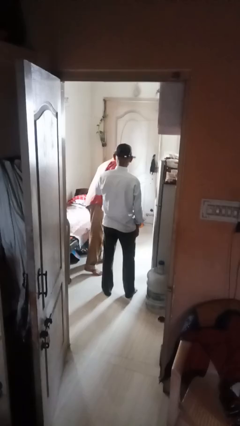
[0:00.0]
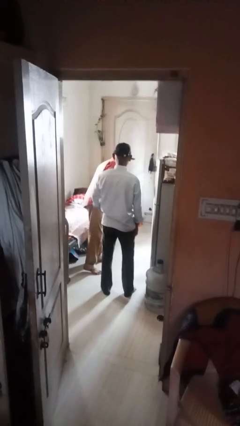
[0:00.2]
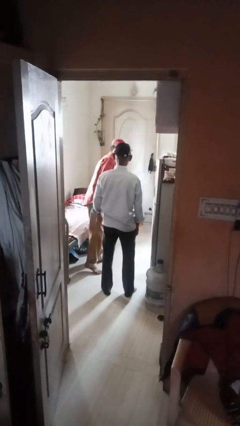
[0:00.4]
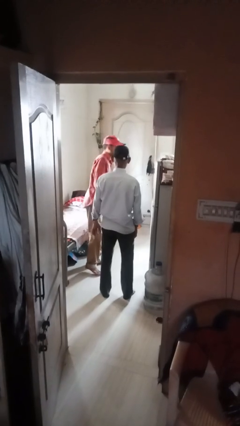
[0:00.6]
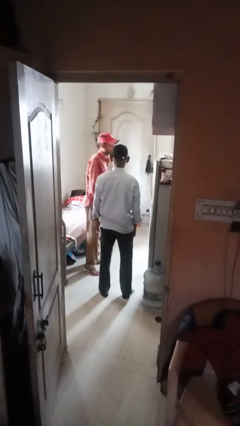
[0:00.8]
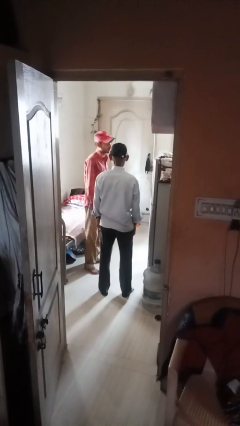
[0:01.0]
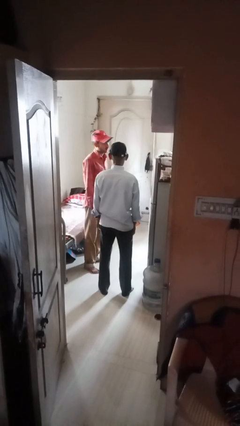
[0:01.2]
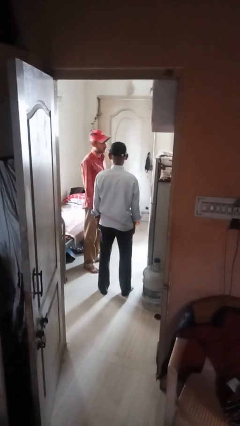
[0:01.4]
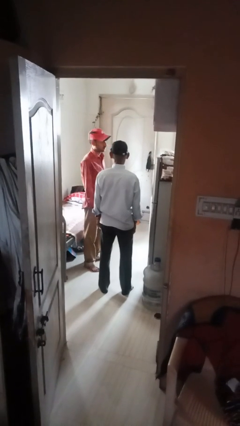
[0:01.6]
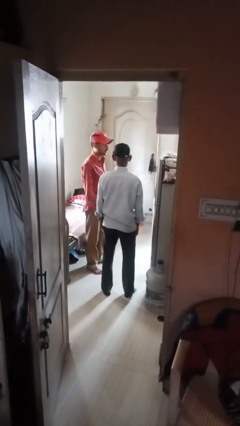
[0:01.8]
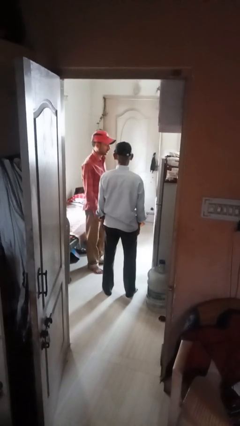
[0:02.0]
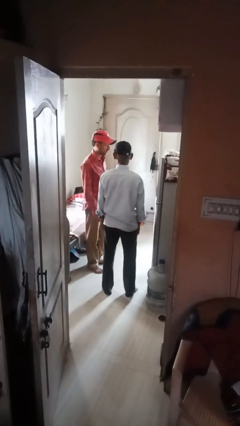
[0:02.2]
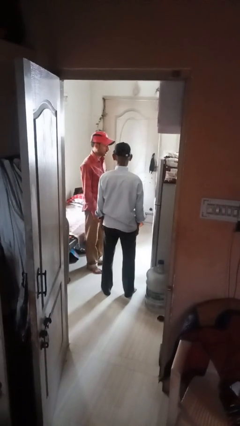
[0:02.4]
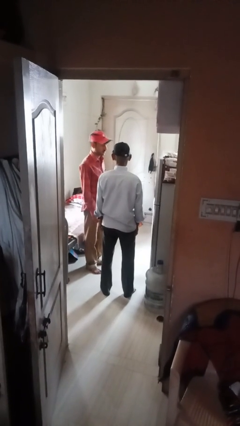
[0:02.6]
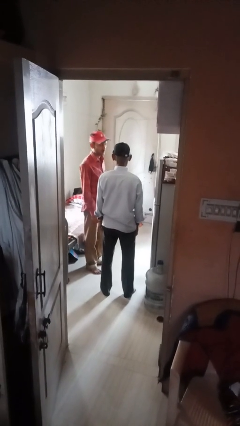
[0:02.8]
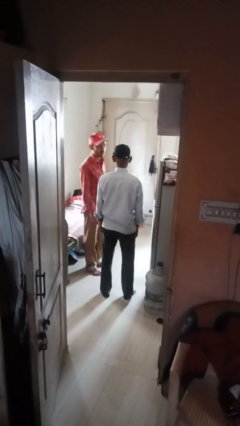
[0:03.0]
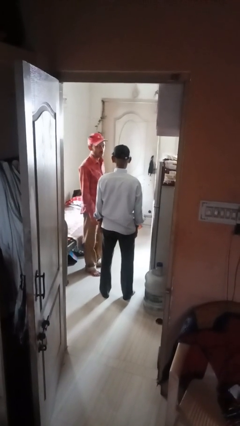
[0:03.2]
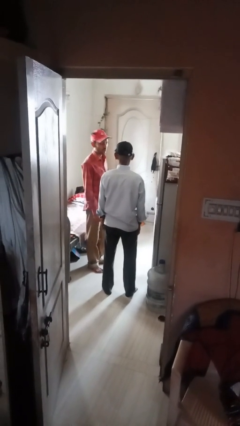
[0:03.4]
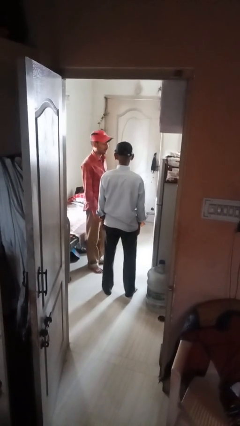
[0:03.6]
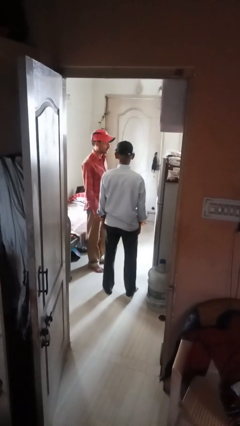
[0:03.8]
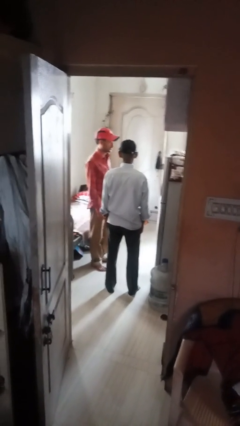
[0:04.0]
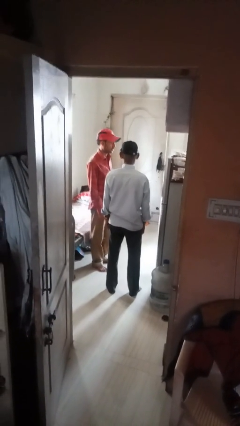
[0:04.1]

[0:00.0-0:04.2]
person shoves person

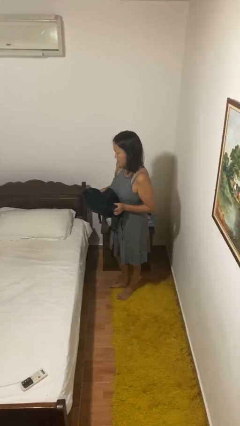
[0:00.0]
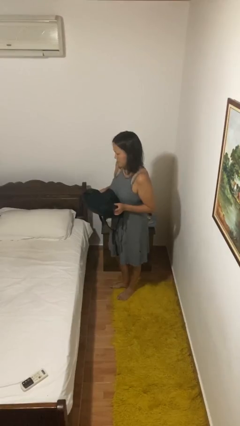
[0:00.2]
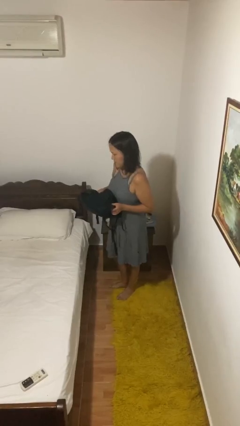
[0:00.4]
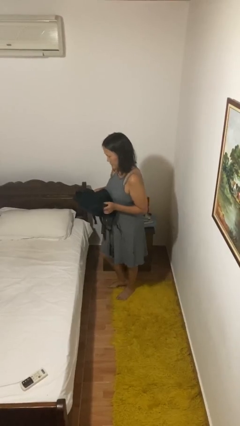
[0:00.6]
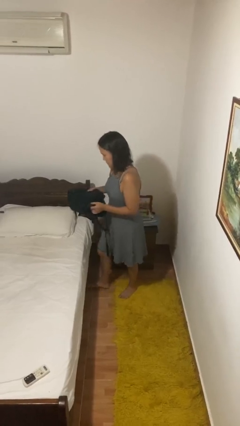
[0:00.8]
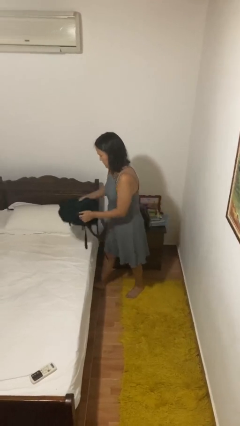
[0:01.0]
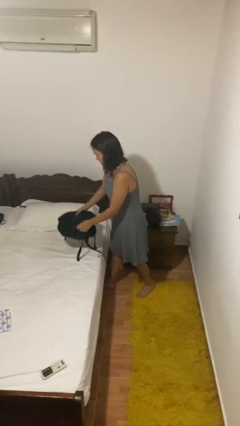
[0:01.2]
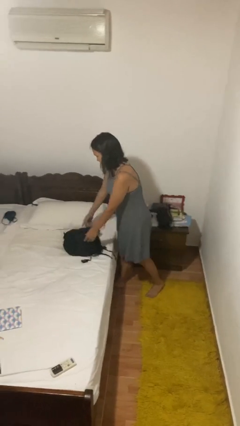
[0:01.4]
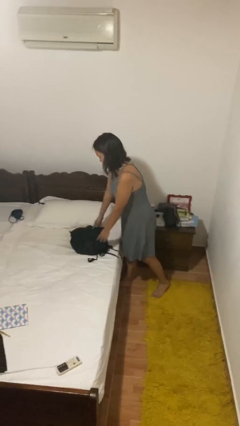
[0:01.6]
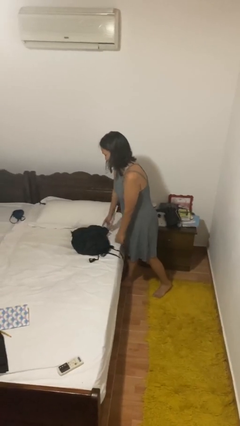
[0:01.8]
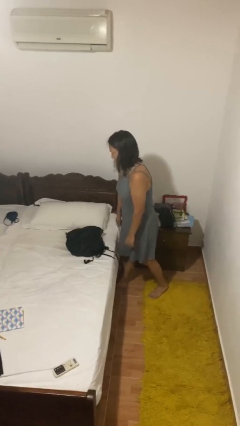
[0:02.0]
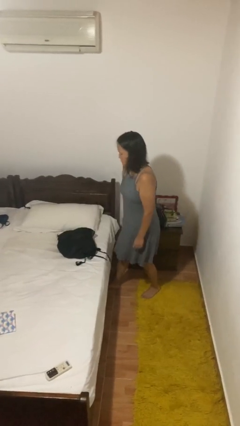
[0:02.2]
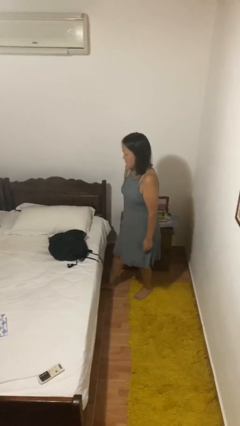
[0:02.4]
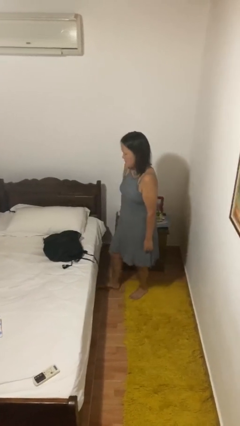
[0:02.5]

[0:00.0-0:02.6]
person puts down object on bed

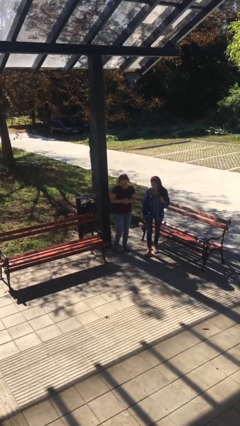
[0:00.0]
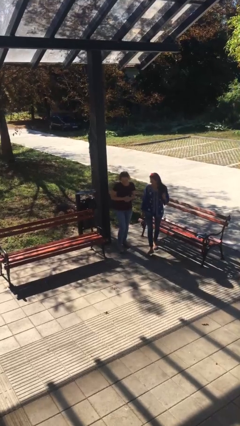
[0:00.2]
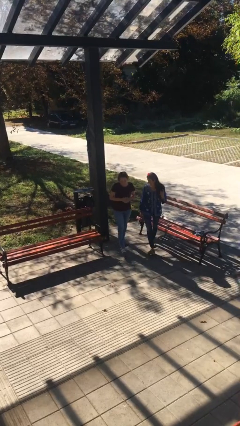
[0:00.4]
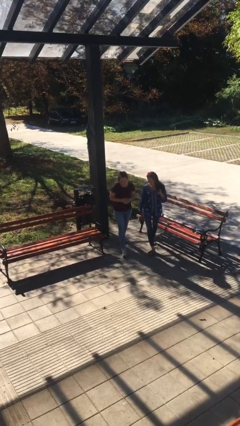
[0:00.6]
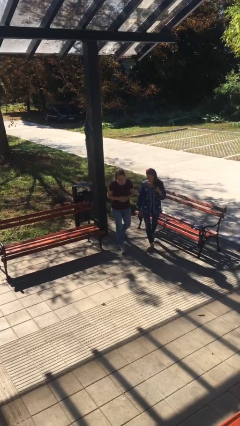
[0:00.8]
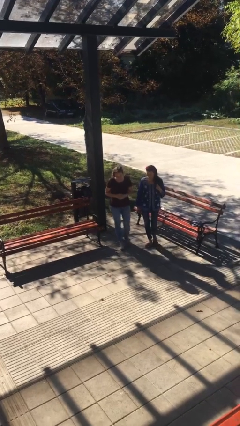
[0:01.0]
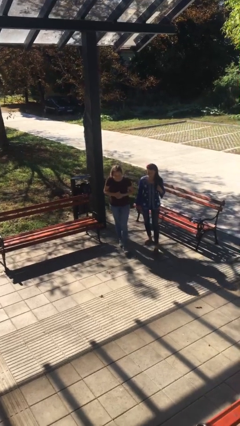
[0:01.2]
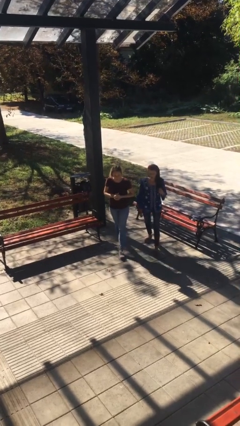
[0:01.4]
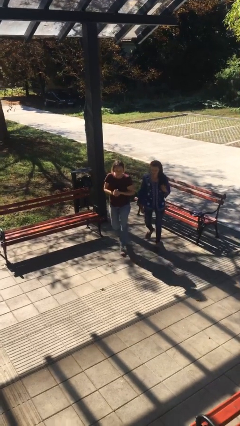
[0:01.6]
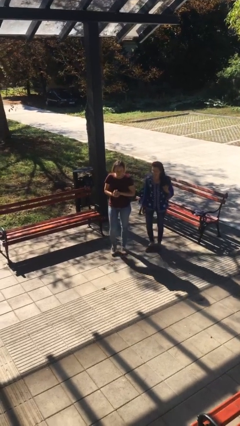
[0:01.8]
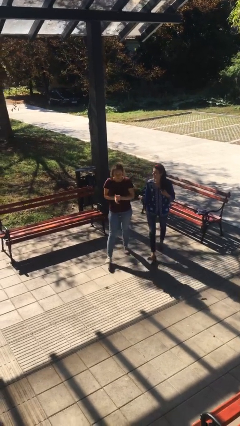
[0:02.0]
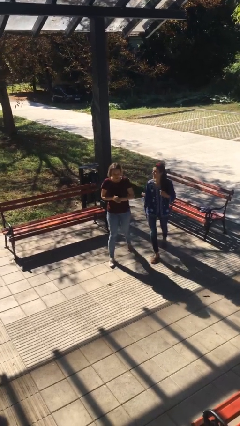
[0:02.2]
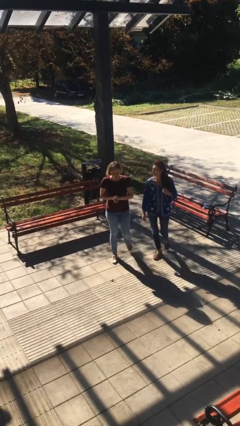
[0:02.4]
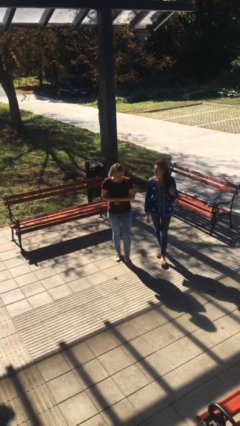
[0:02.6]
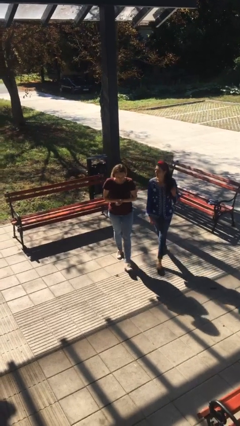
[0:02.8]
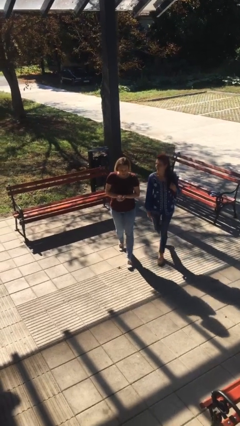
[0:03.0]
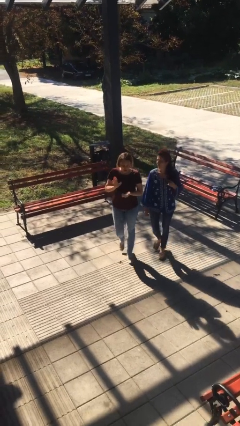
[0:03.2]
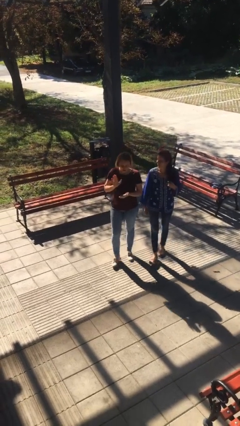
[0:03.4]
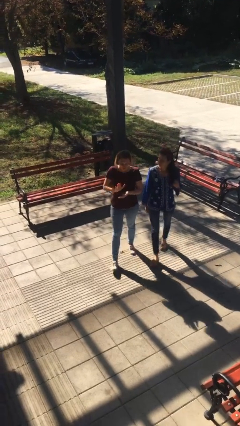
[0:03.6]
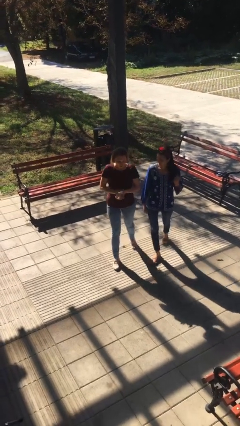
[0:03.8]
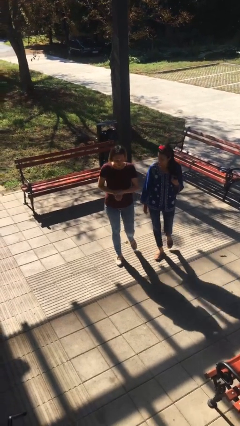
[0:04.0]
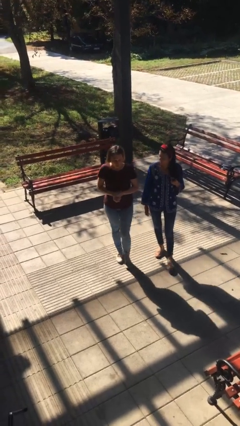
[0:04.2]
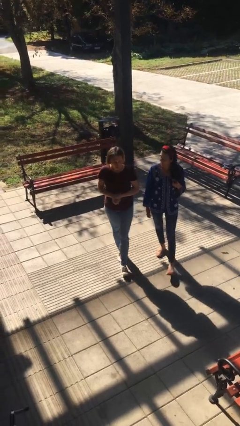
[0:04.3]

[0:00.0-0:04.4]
person talks to person

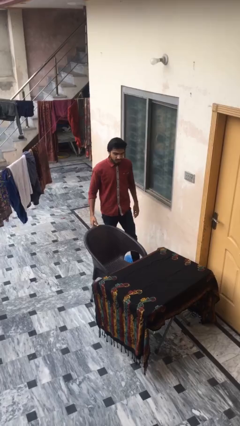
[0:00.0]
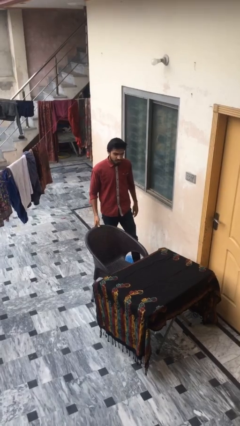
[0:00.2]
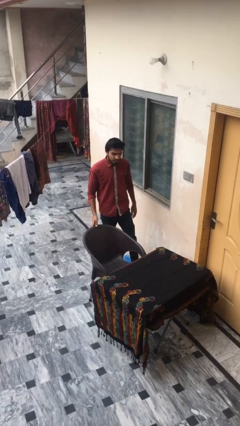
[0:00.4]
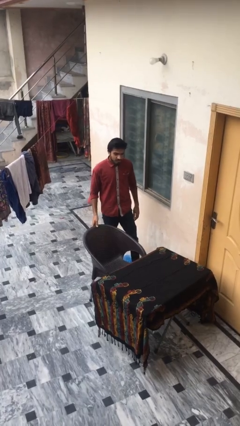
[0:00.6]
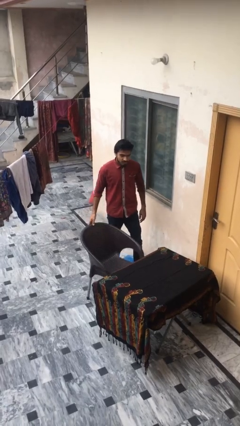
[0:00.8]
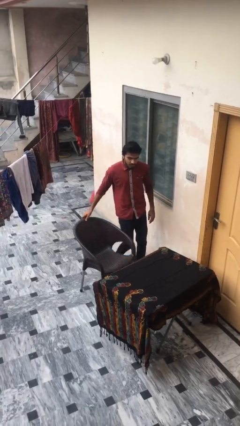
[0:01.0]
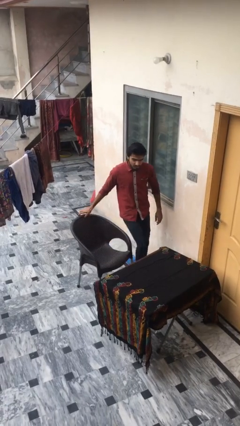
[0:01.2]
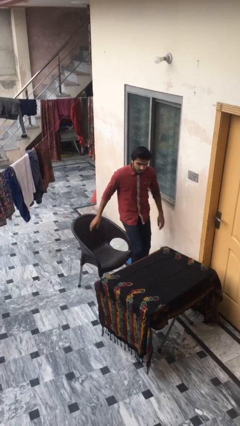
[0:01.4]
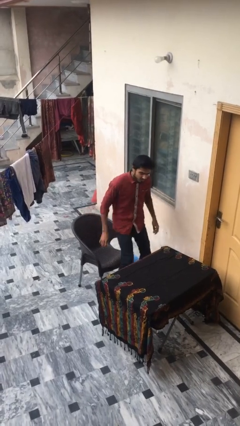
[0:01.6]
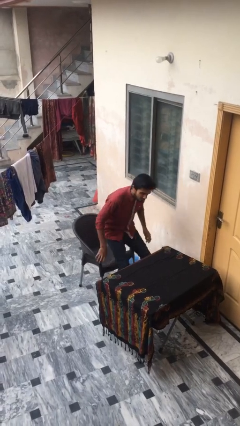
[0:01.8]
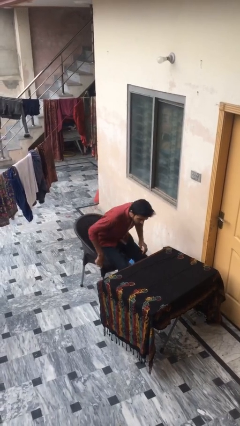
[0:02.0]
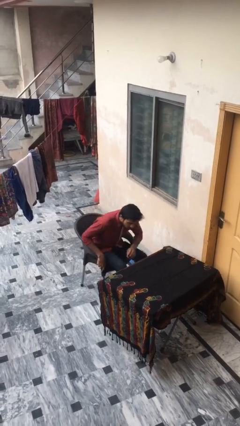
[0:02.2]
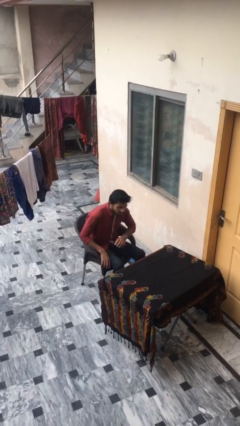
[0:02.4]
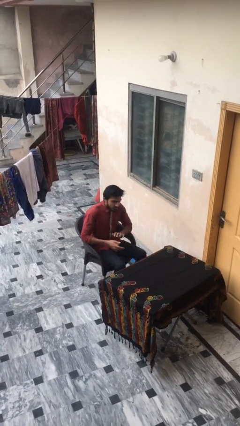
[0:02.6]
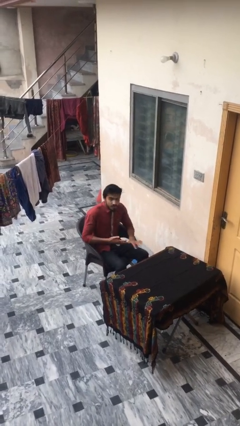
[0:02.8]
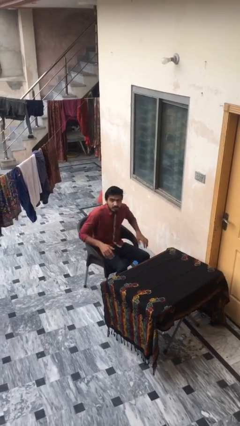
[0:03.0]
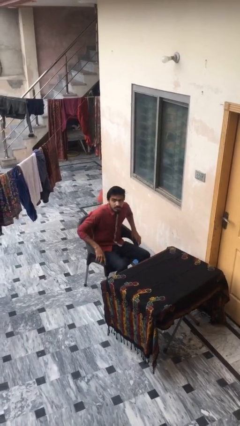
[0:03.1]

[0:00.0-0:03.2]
person sits down

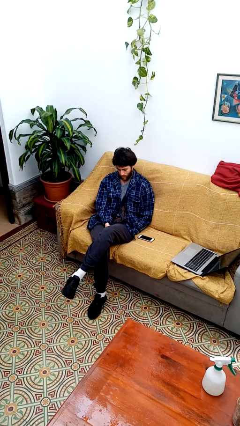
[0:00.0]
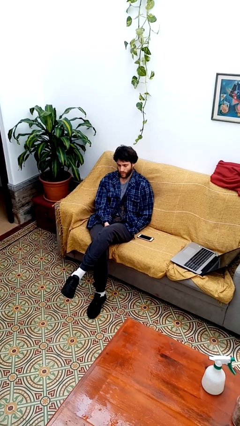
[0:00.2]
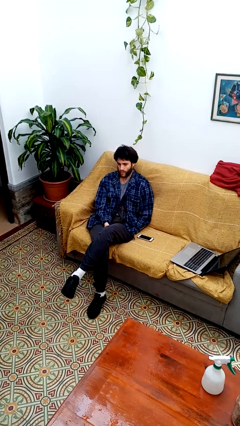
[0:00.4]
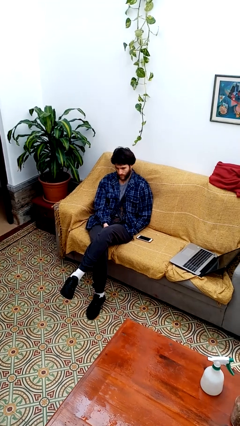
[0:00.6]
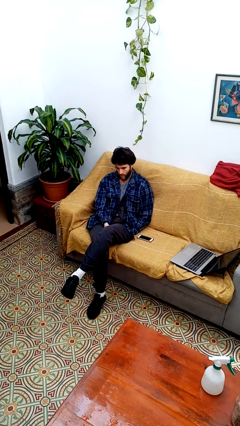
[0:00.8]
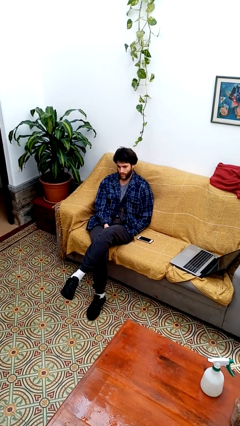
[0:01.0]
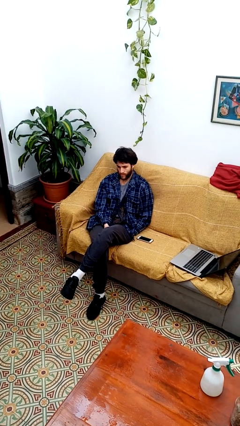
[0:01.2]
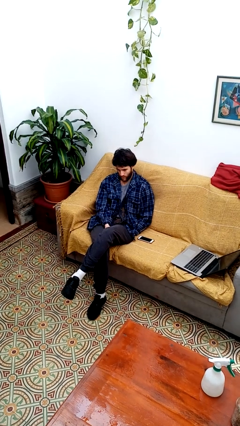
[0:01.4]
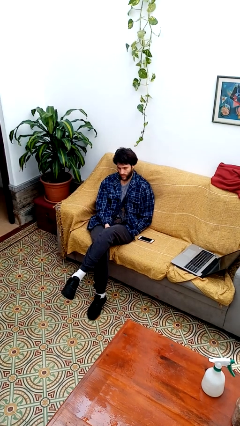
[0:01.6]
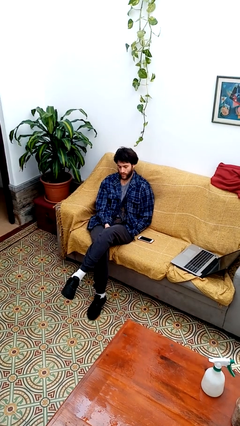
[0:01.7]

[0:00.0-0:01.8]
person nods head

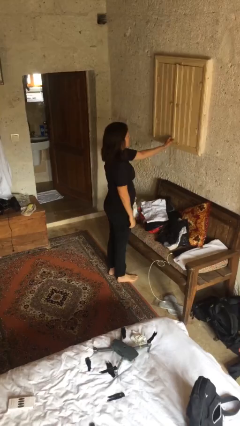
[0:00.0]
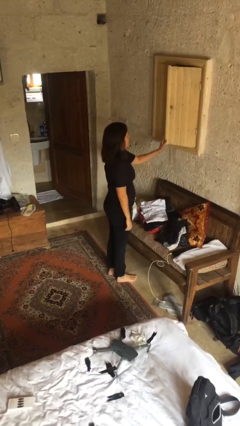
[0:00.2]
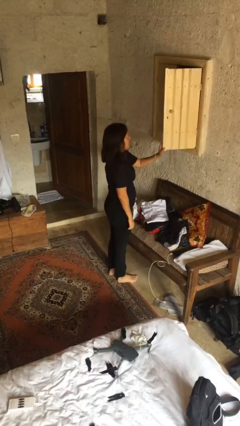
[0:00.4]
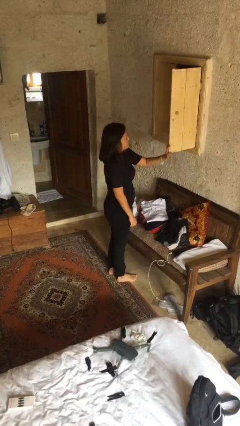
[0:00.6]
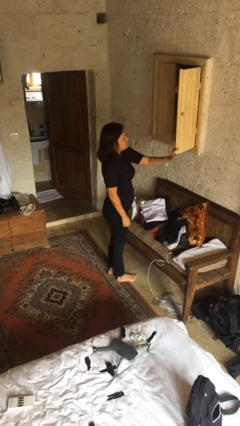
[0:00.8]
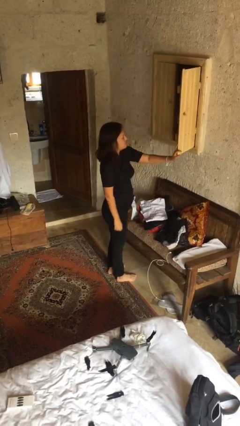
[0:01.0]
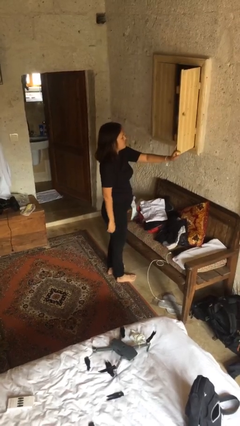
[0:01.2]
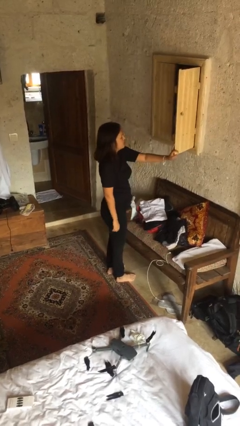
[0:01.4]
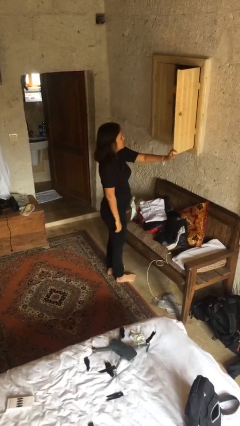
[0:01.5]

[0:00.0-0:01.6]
person opens dresser drawer
